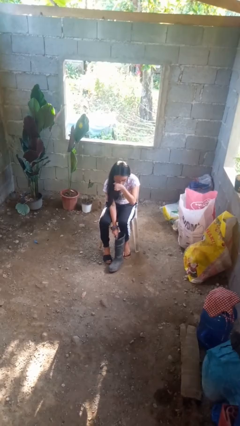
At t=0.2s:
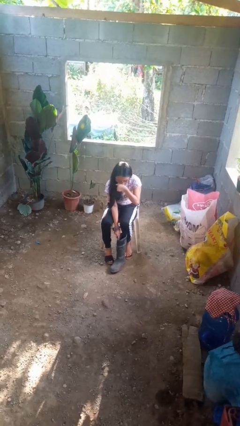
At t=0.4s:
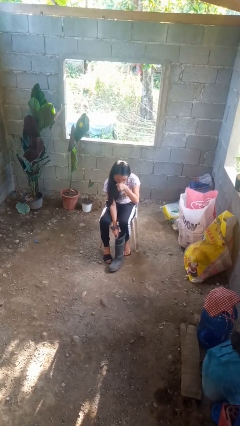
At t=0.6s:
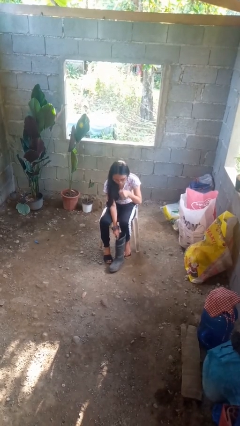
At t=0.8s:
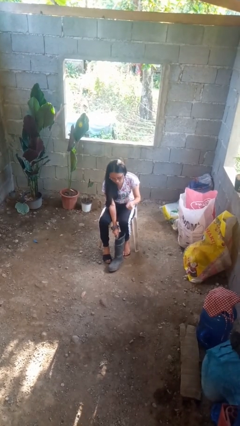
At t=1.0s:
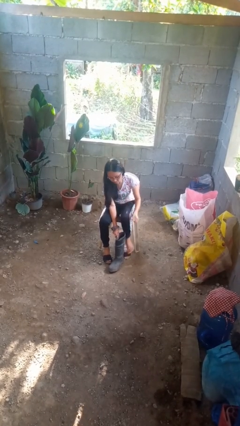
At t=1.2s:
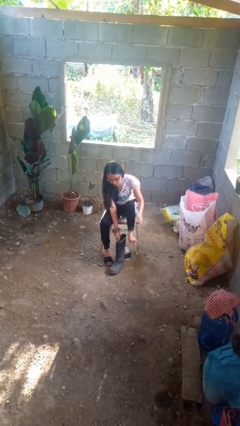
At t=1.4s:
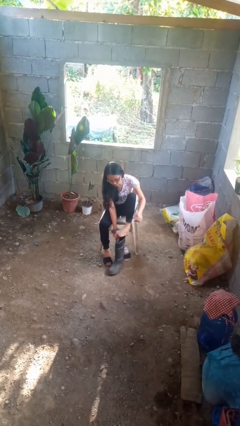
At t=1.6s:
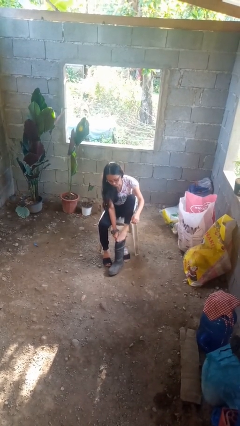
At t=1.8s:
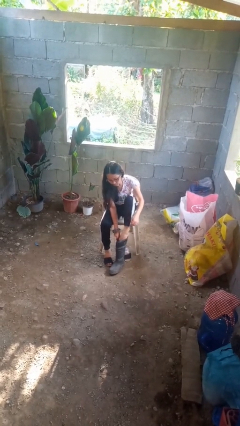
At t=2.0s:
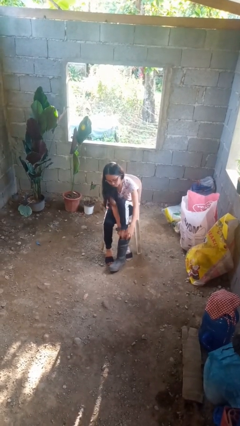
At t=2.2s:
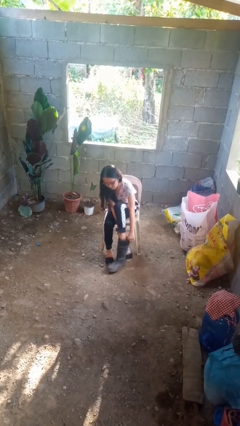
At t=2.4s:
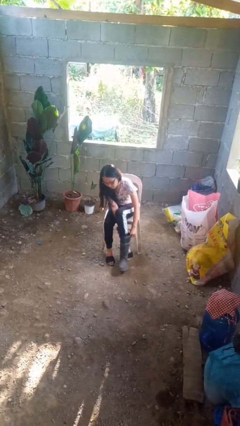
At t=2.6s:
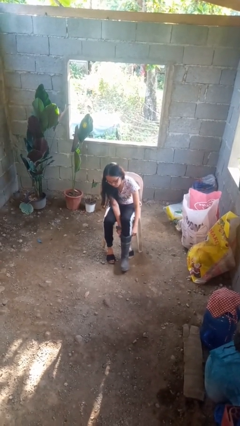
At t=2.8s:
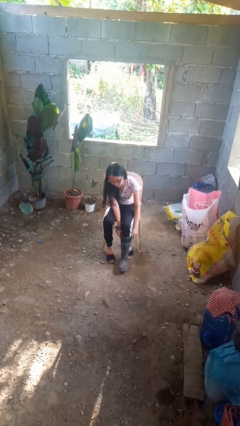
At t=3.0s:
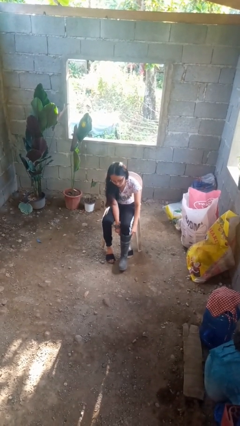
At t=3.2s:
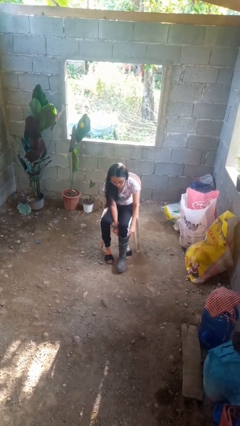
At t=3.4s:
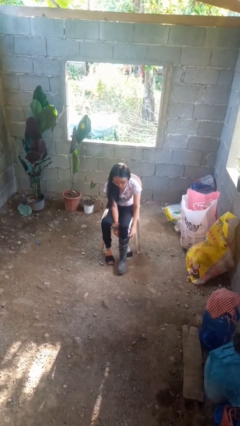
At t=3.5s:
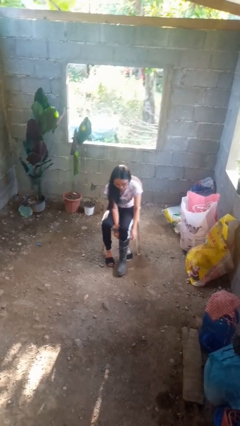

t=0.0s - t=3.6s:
person puts on boots

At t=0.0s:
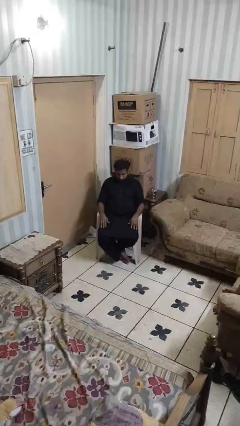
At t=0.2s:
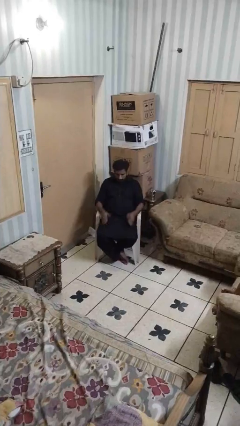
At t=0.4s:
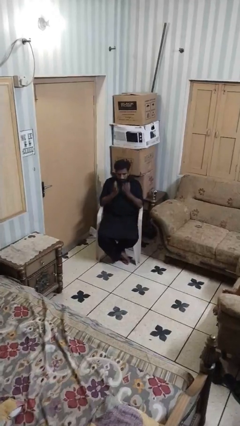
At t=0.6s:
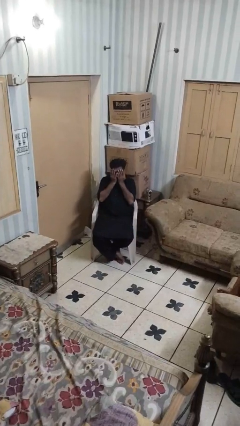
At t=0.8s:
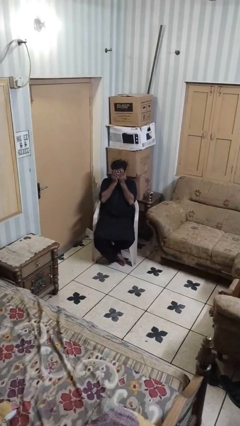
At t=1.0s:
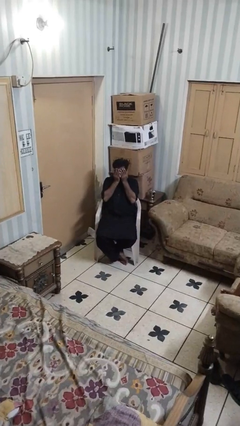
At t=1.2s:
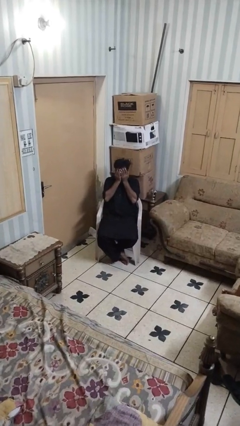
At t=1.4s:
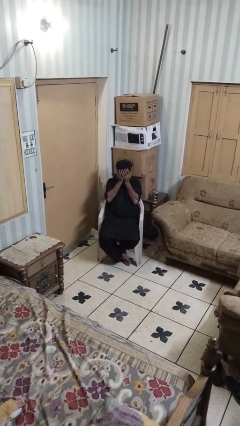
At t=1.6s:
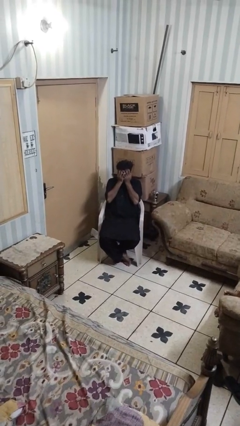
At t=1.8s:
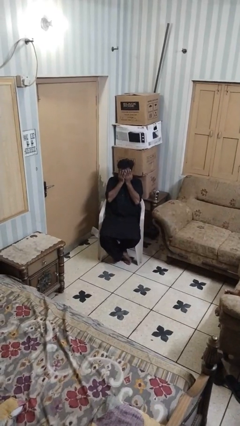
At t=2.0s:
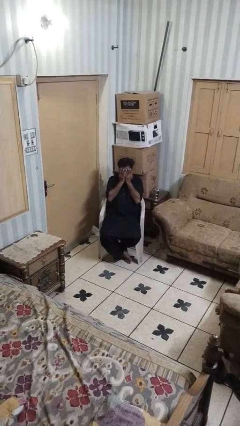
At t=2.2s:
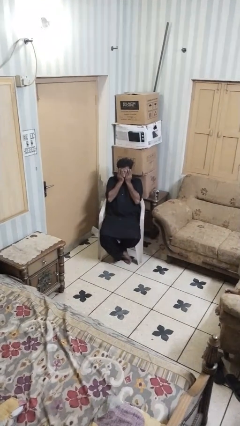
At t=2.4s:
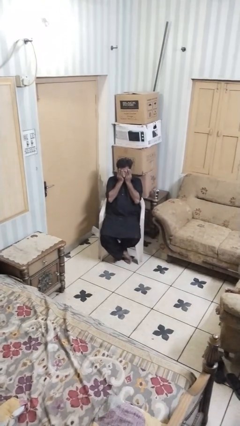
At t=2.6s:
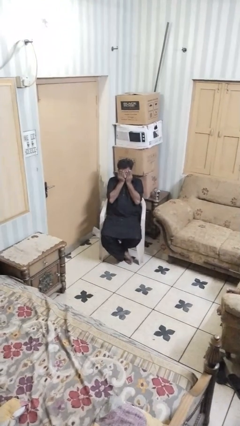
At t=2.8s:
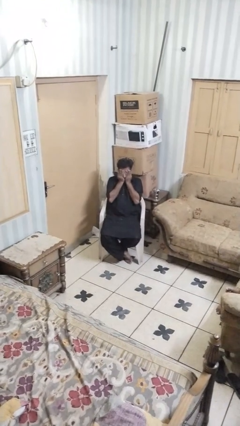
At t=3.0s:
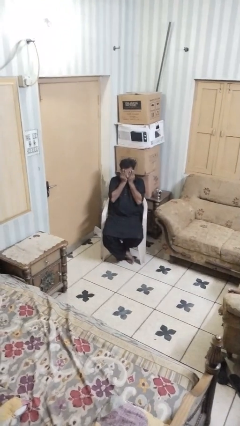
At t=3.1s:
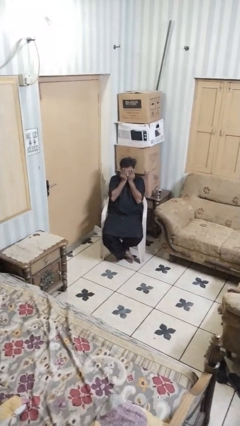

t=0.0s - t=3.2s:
person covers face with hands

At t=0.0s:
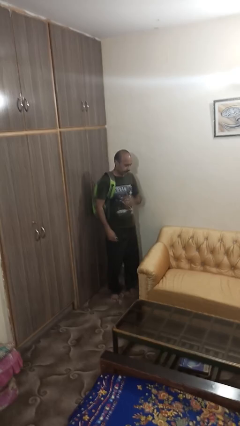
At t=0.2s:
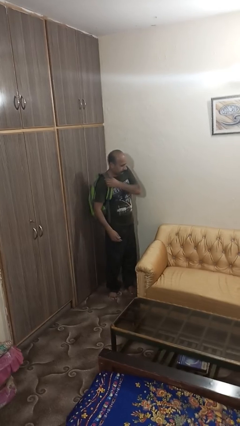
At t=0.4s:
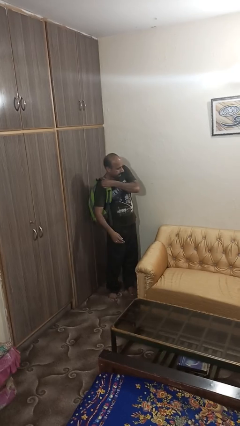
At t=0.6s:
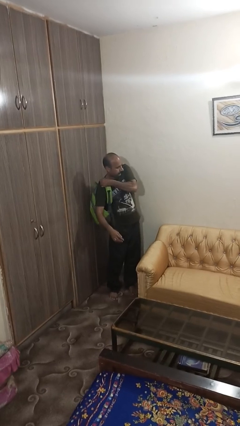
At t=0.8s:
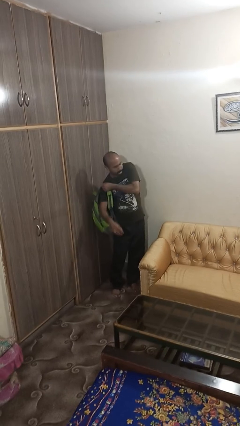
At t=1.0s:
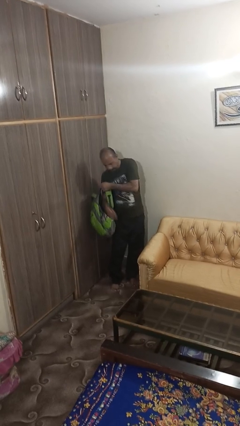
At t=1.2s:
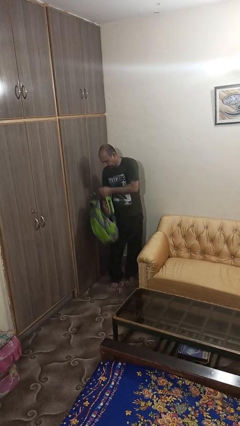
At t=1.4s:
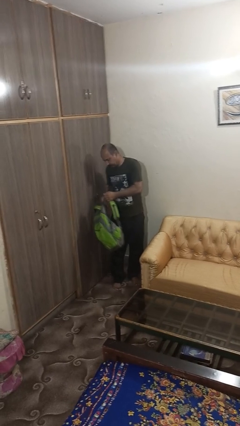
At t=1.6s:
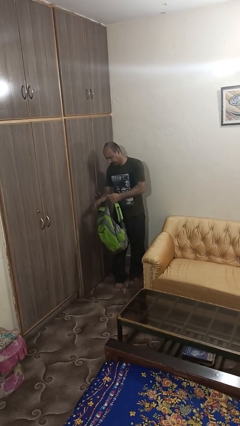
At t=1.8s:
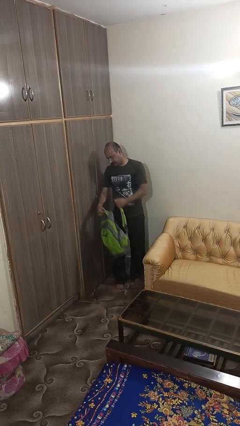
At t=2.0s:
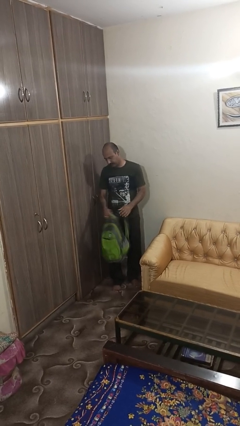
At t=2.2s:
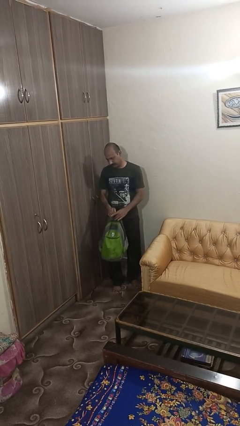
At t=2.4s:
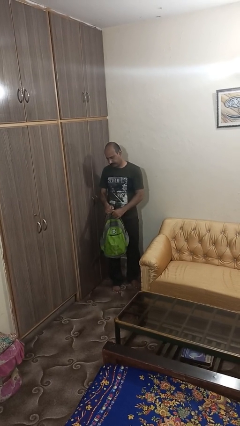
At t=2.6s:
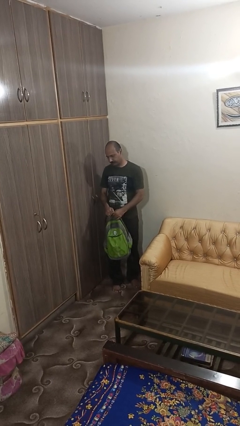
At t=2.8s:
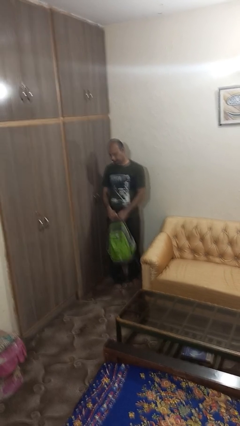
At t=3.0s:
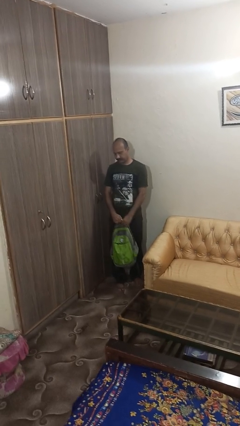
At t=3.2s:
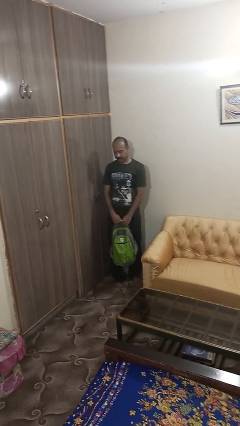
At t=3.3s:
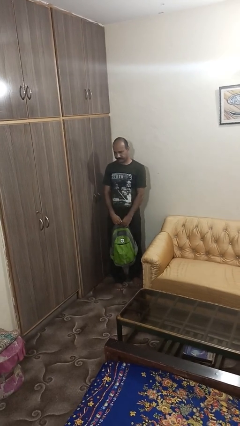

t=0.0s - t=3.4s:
person takes off backpack

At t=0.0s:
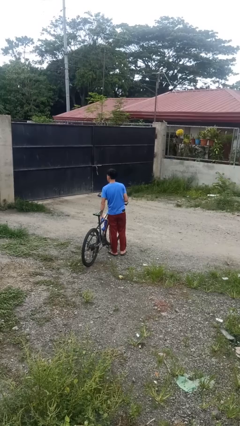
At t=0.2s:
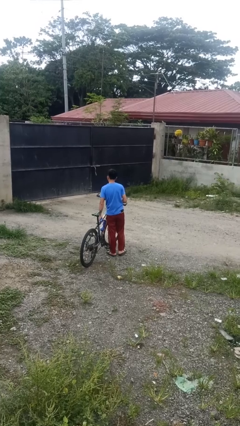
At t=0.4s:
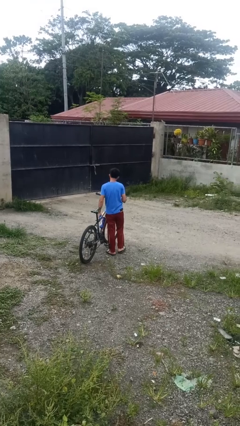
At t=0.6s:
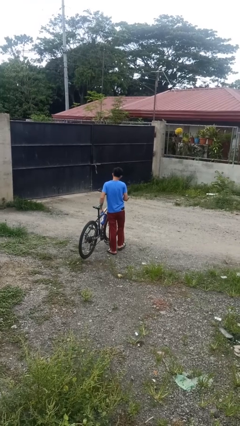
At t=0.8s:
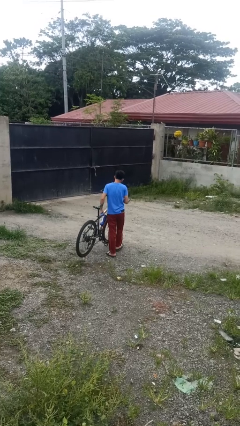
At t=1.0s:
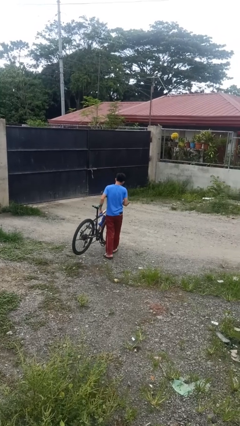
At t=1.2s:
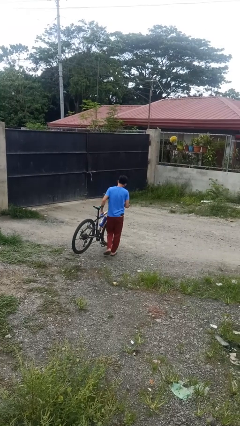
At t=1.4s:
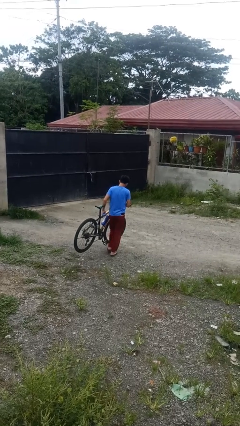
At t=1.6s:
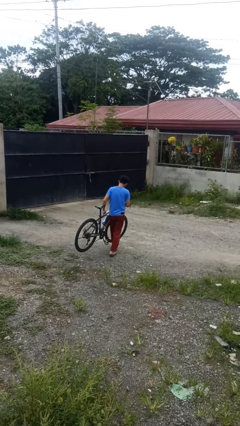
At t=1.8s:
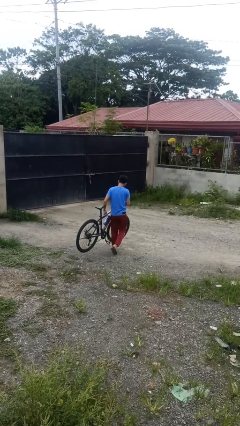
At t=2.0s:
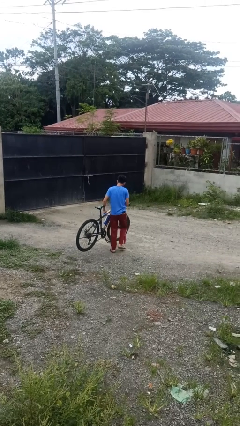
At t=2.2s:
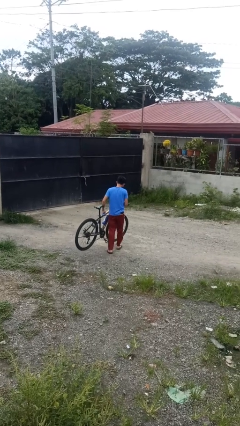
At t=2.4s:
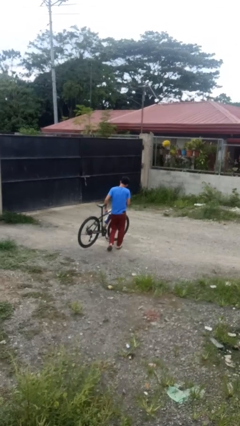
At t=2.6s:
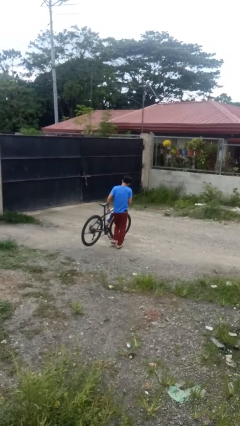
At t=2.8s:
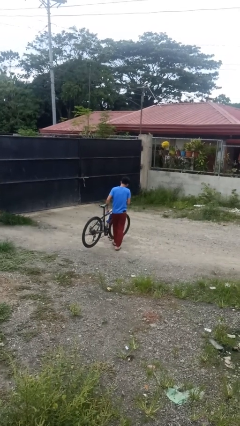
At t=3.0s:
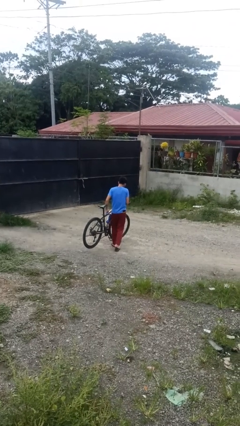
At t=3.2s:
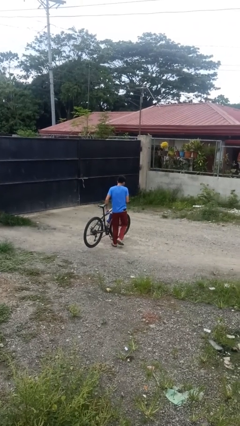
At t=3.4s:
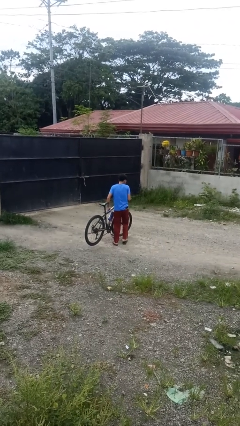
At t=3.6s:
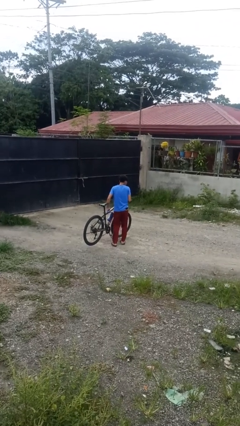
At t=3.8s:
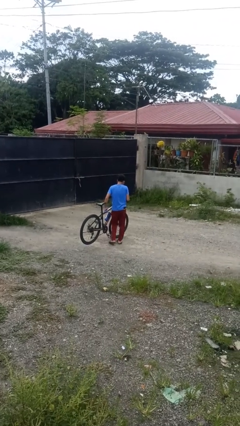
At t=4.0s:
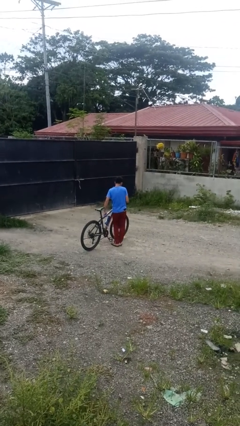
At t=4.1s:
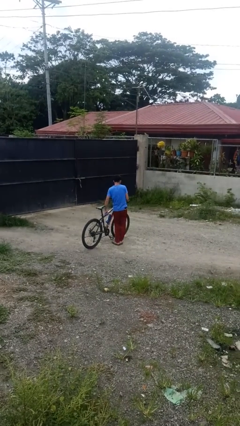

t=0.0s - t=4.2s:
person carries bicycle

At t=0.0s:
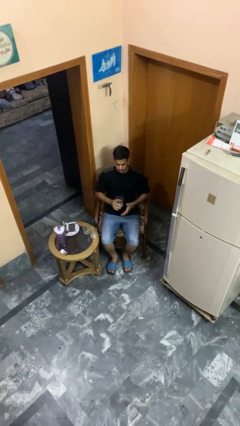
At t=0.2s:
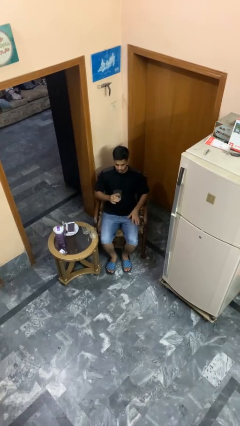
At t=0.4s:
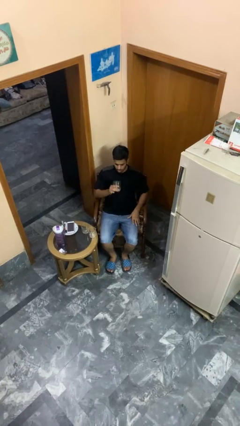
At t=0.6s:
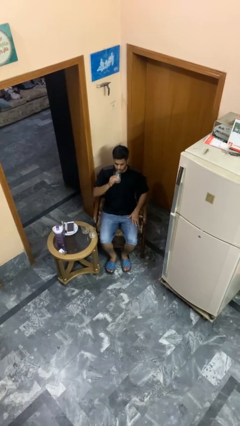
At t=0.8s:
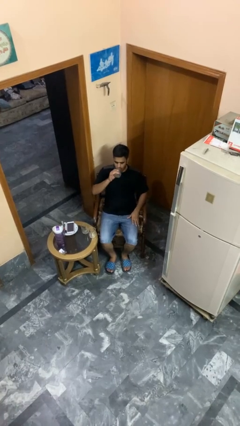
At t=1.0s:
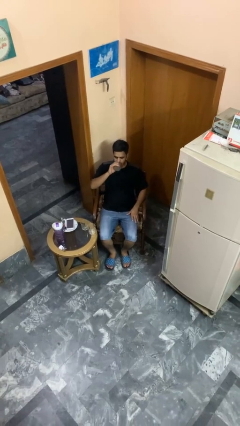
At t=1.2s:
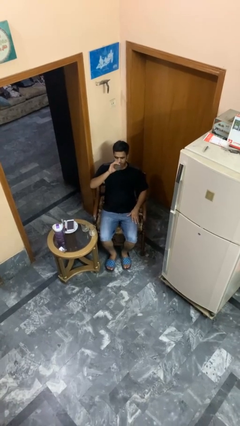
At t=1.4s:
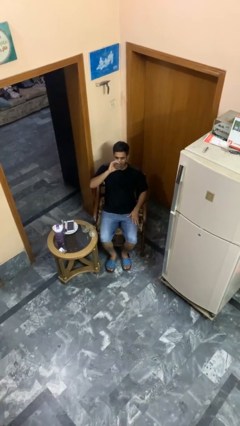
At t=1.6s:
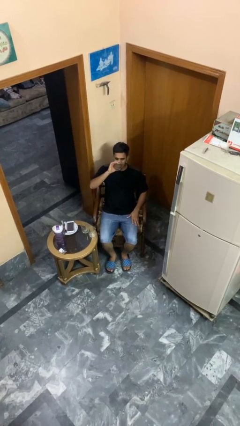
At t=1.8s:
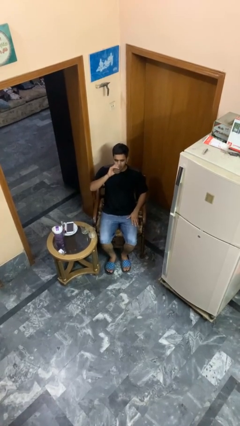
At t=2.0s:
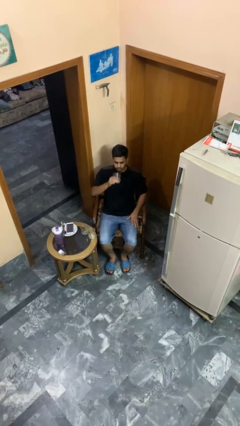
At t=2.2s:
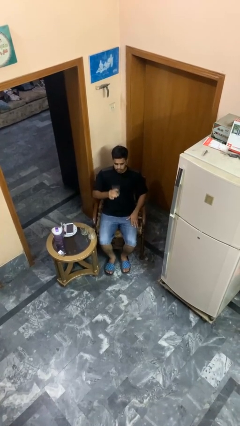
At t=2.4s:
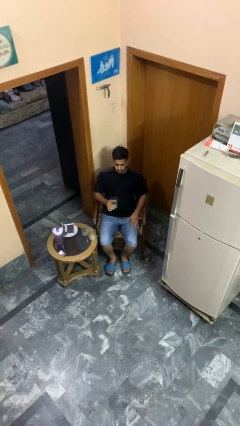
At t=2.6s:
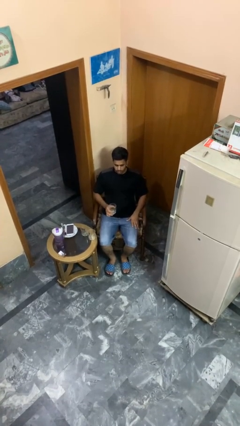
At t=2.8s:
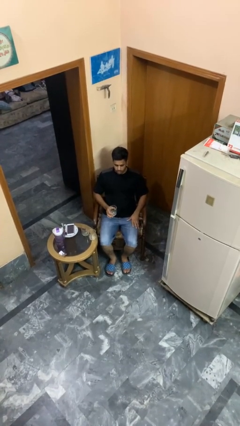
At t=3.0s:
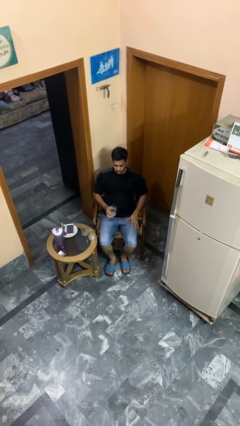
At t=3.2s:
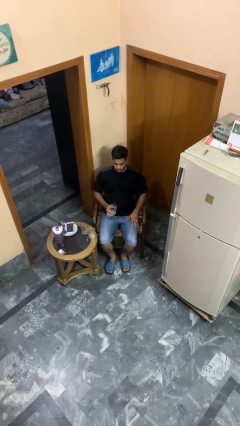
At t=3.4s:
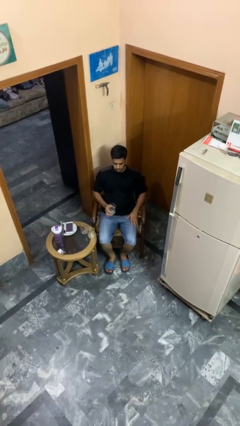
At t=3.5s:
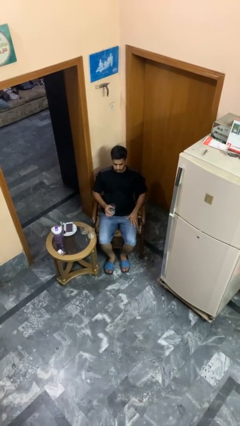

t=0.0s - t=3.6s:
person drinks from shotglass
